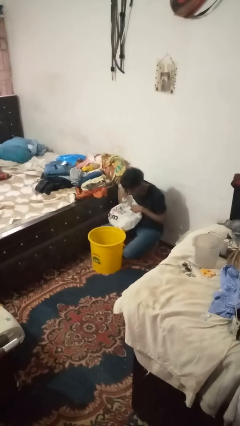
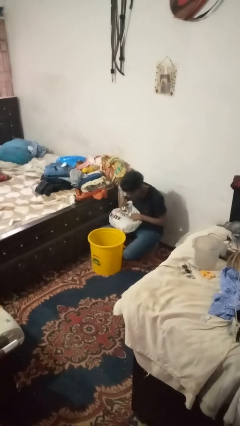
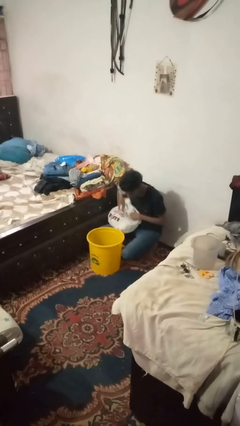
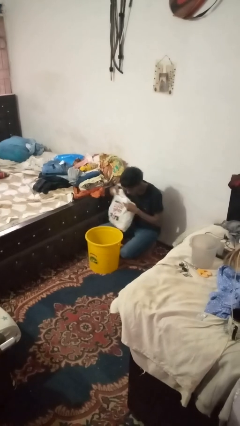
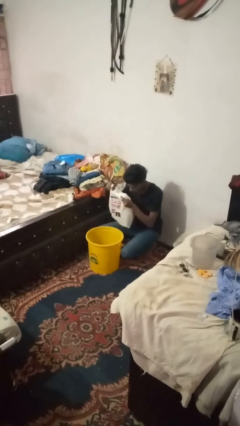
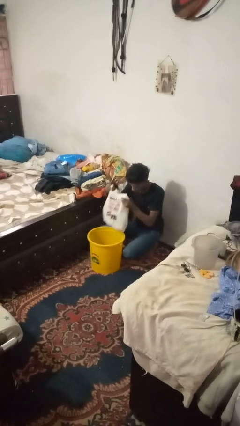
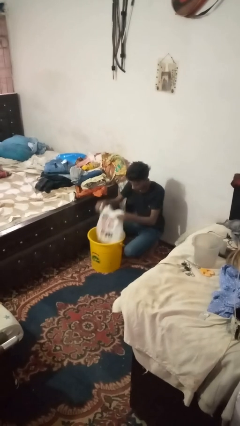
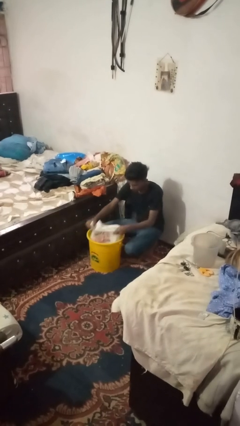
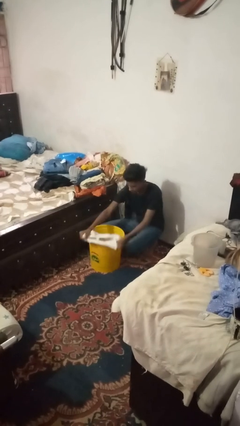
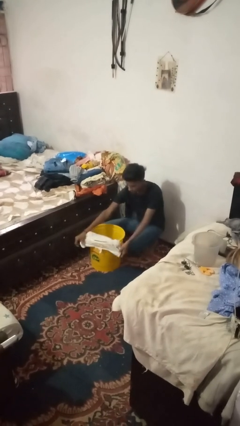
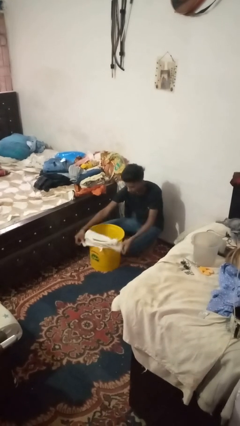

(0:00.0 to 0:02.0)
person inserts trashbag into trashcan

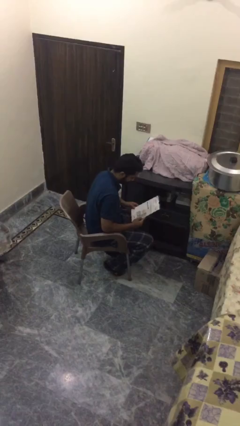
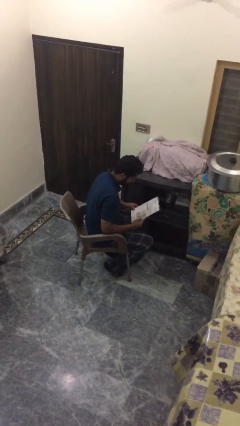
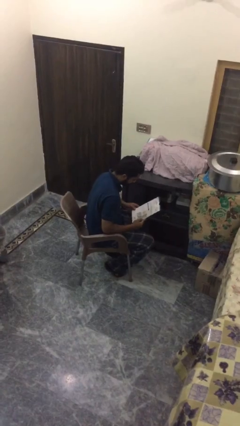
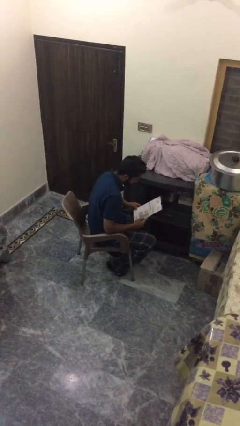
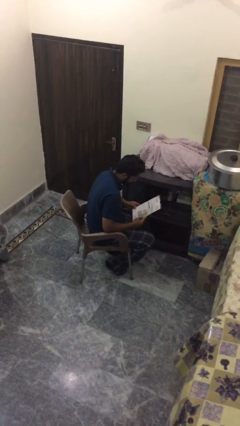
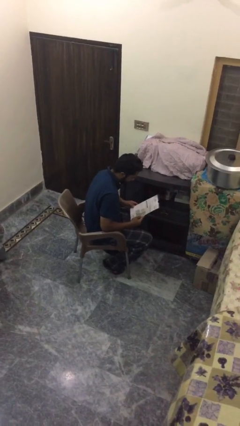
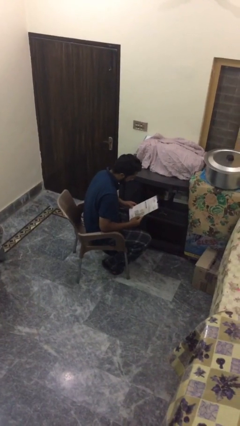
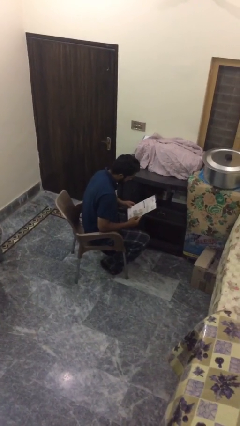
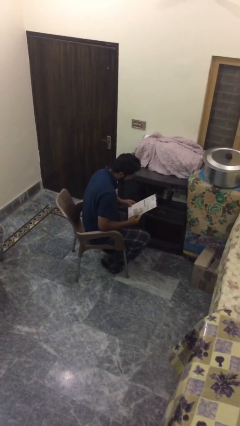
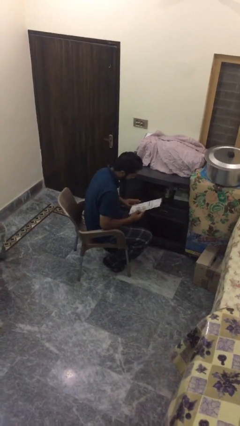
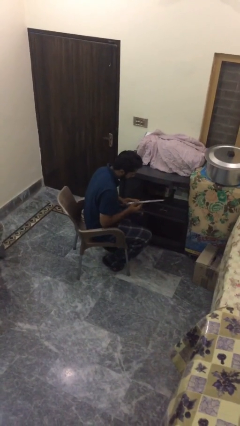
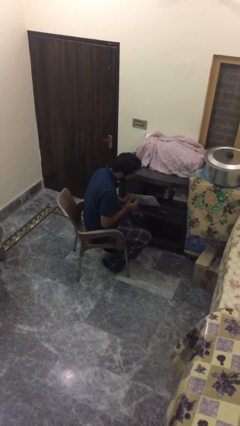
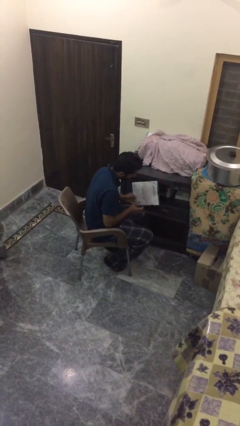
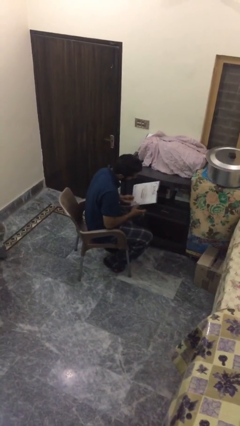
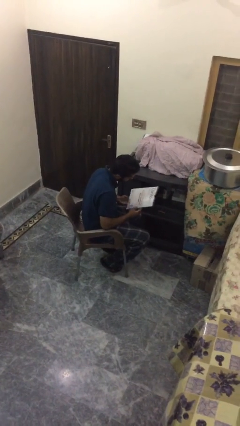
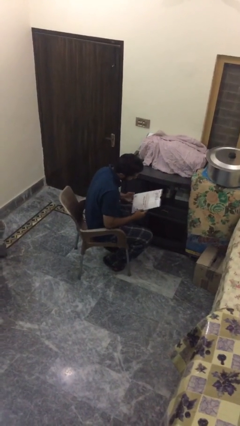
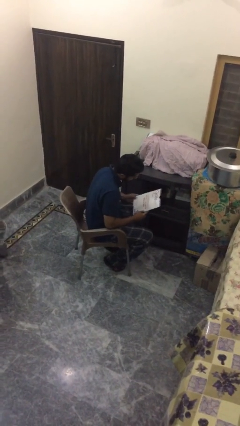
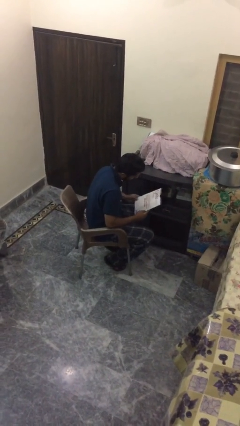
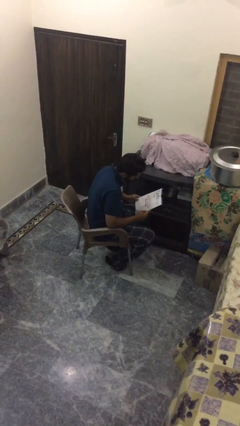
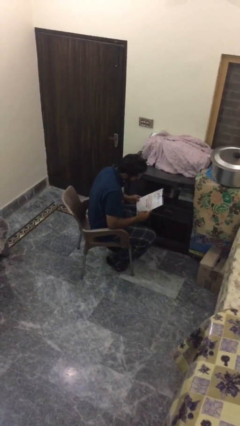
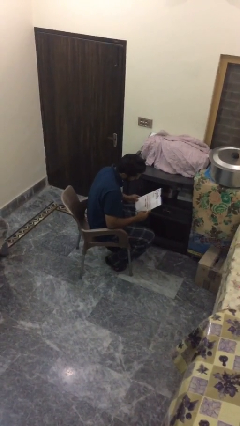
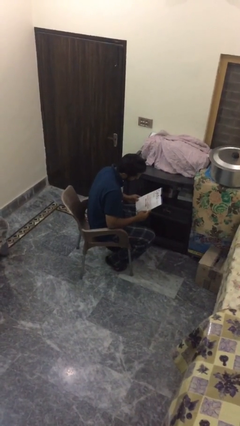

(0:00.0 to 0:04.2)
person reads document

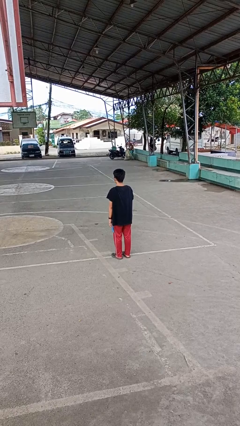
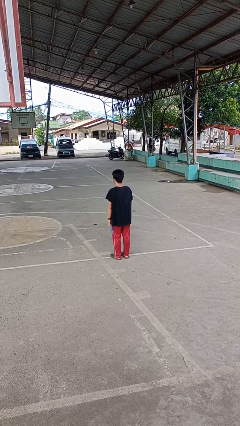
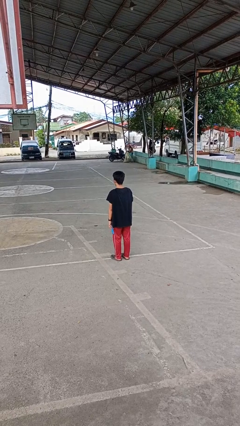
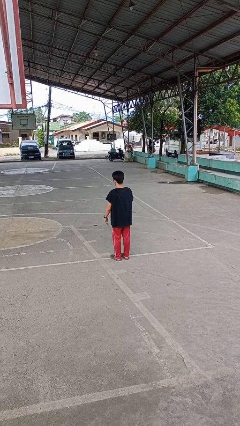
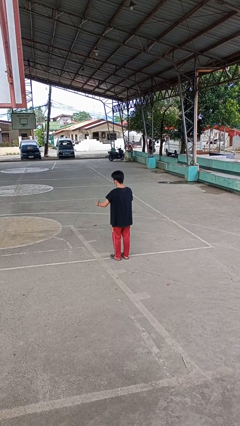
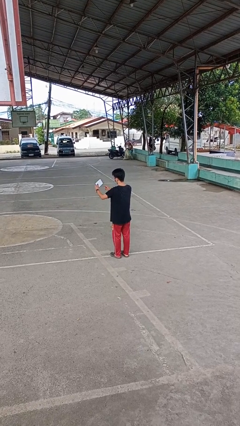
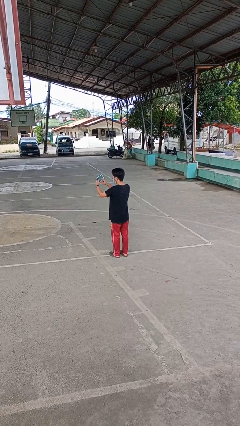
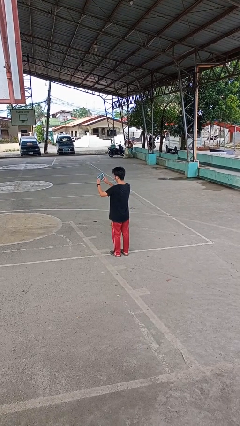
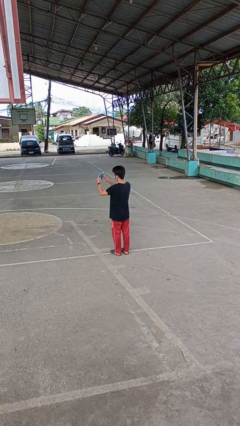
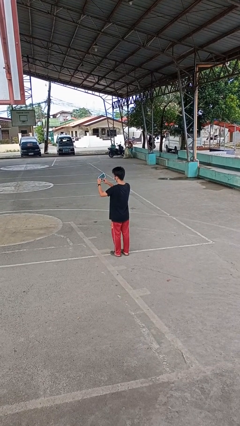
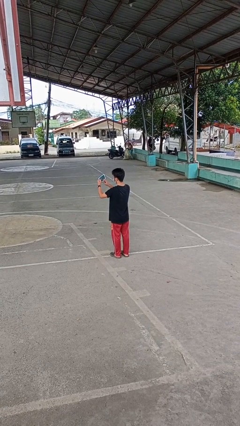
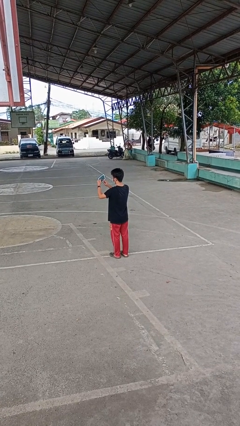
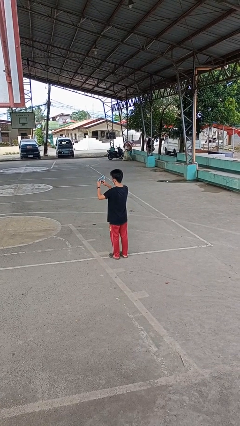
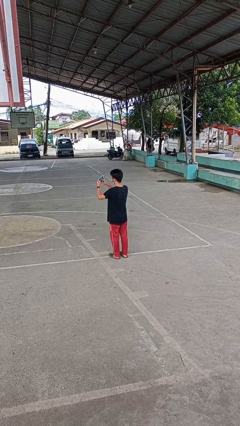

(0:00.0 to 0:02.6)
person interacts with tablet

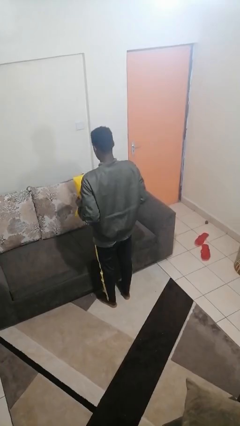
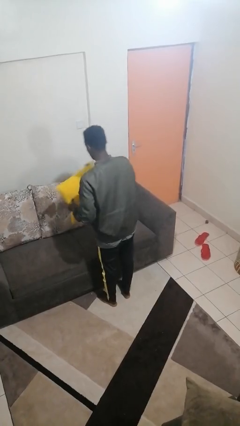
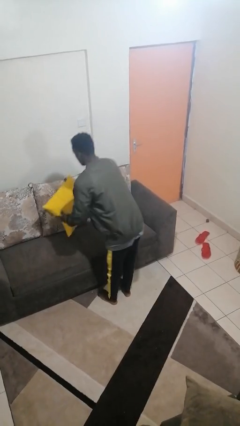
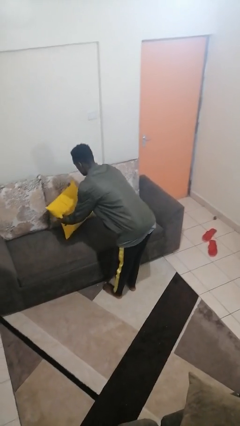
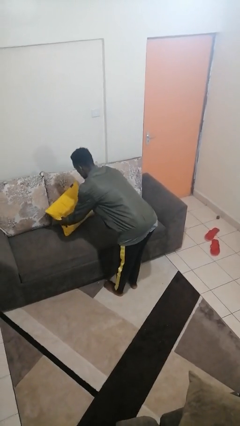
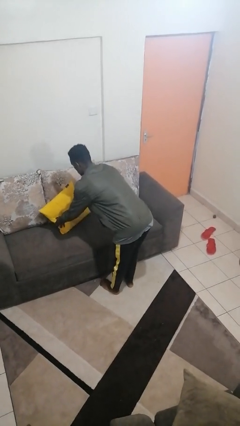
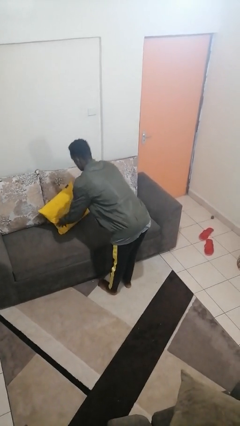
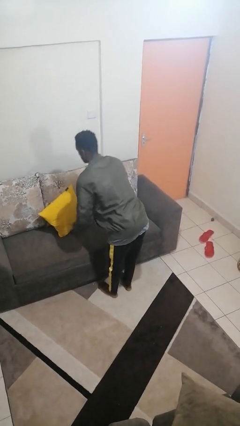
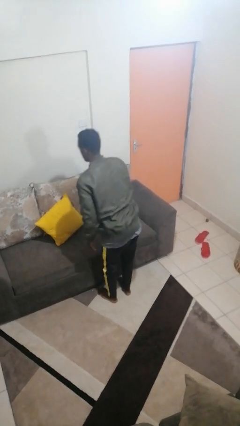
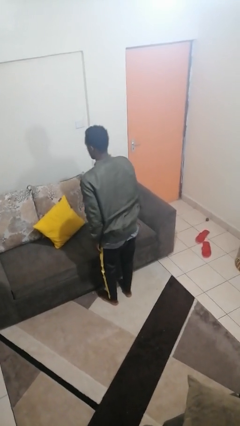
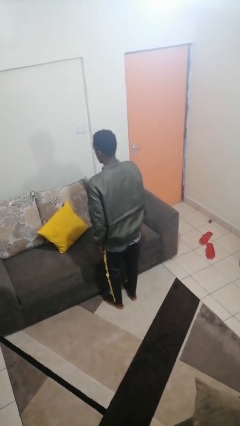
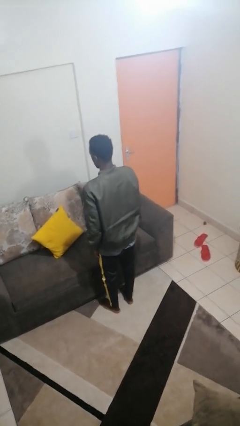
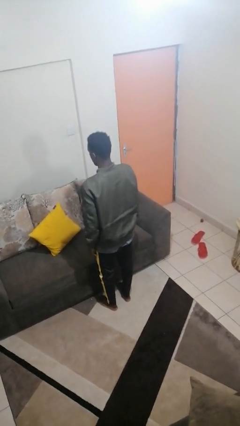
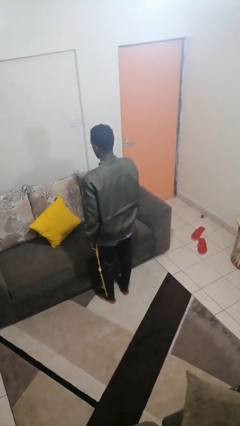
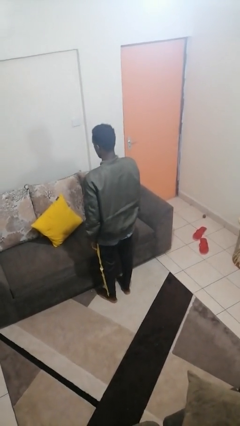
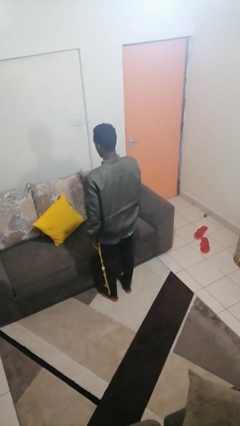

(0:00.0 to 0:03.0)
person puts down object on couch

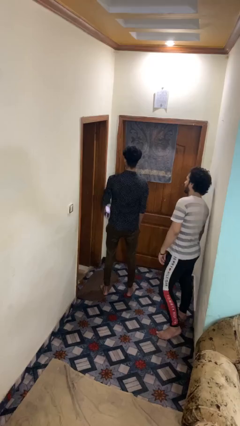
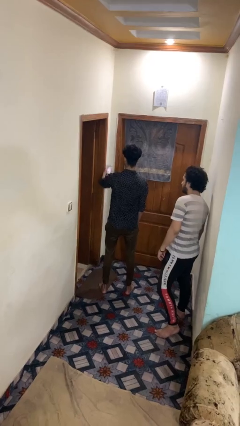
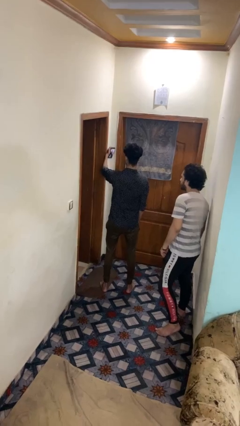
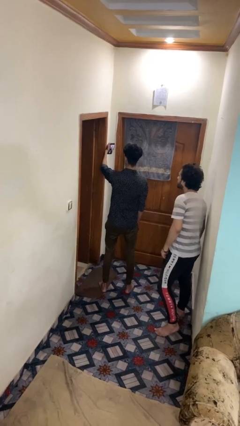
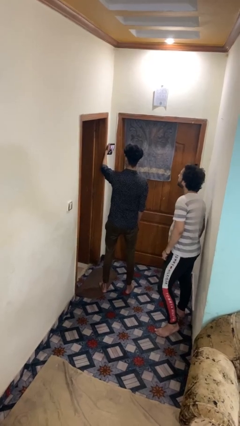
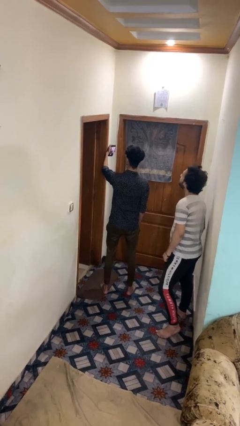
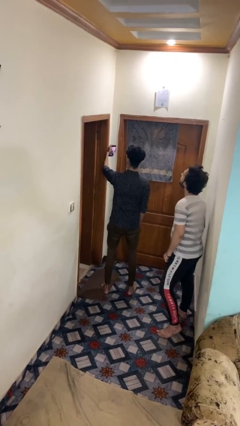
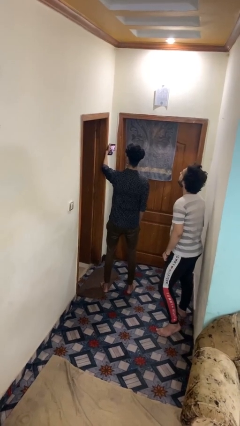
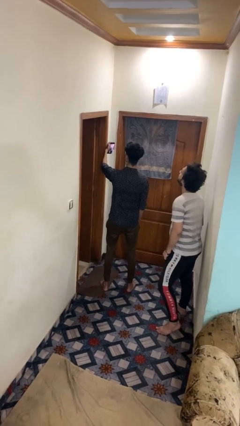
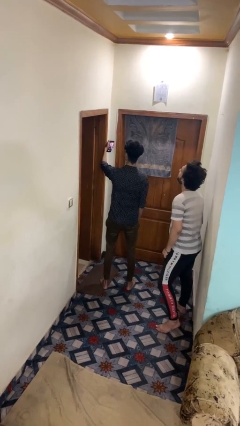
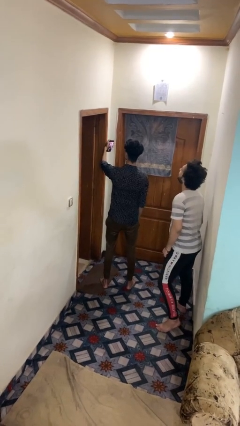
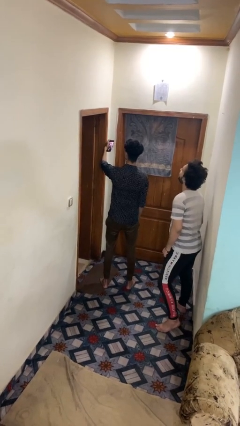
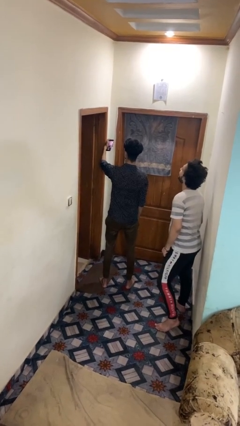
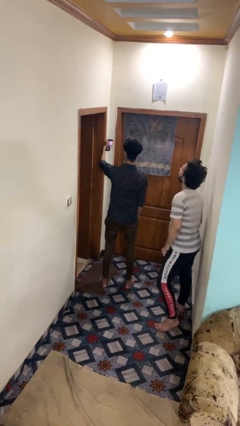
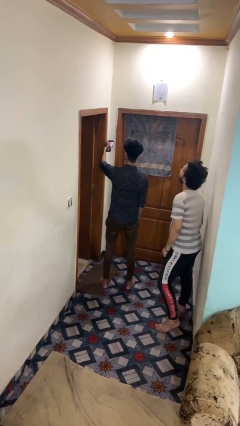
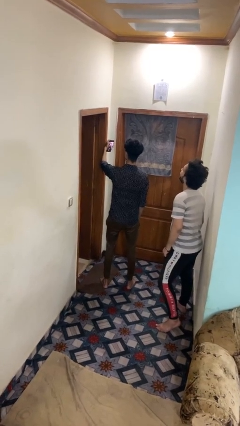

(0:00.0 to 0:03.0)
person takes selfie with person

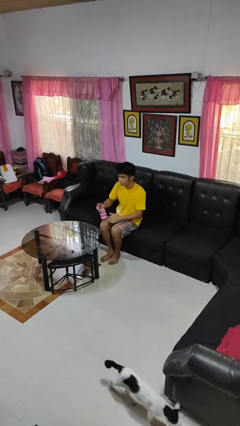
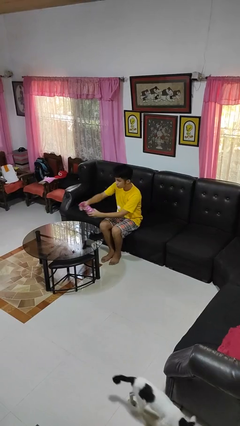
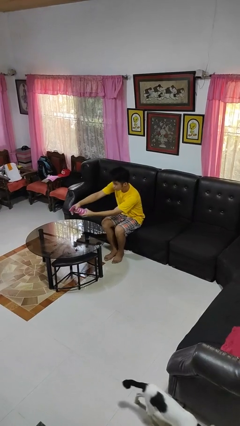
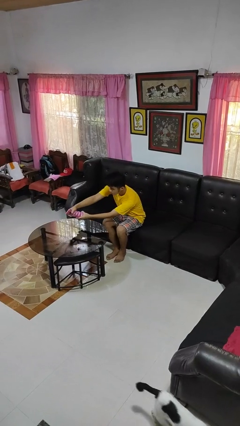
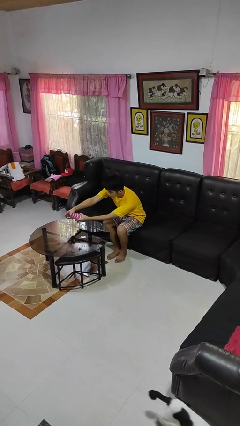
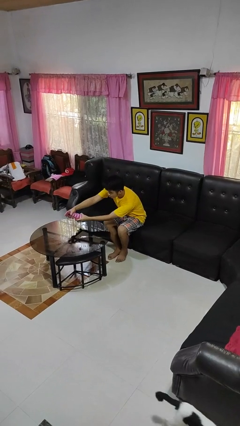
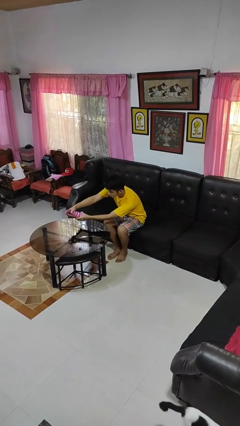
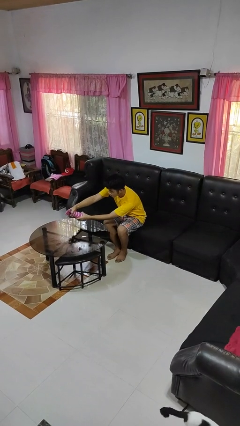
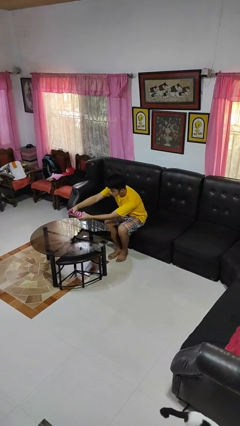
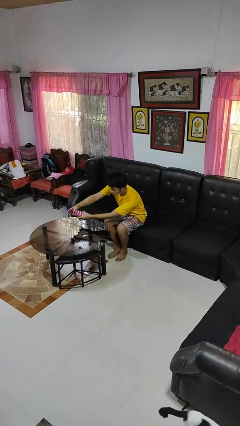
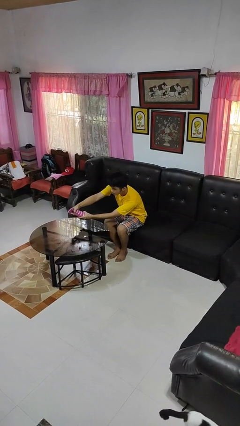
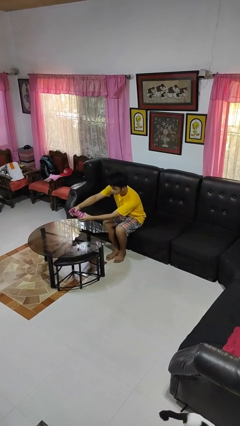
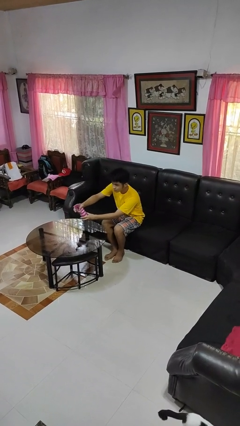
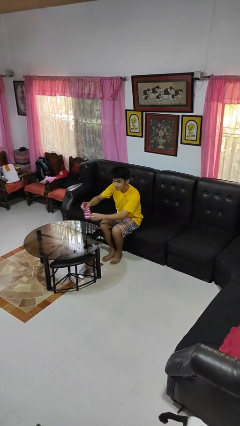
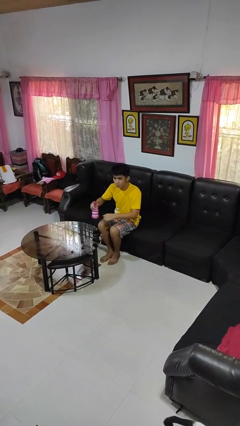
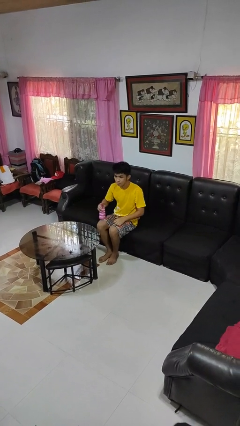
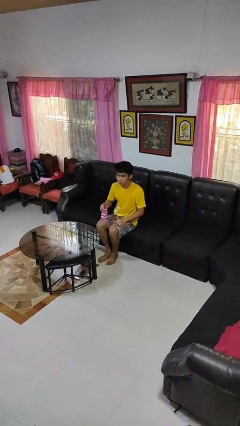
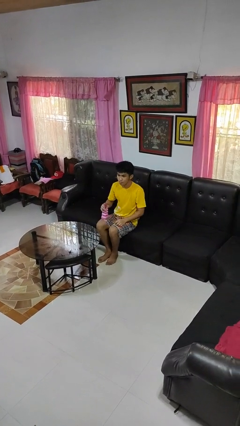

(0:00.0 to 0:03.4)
person sprays from bottle
